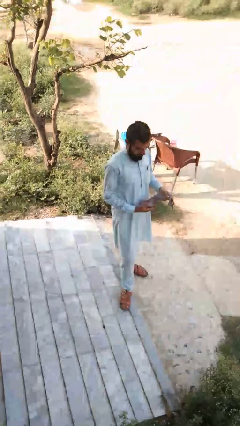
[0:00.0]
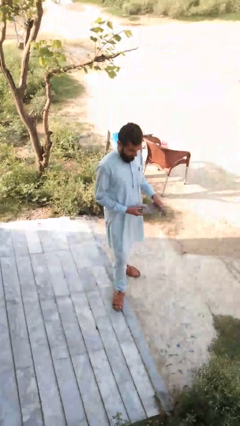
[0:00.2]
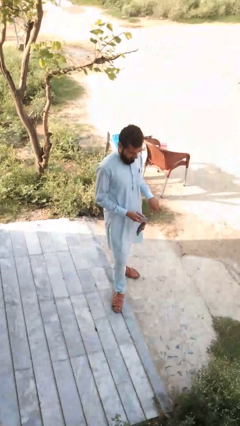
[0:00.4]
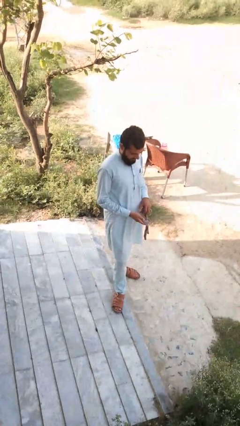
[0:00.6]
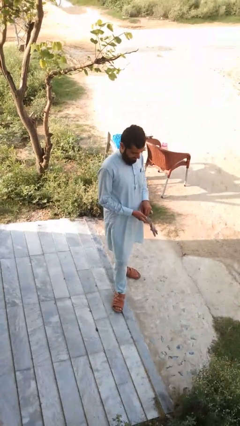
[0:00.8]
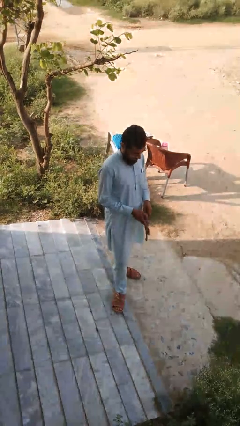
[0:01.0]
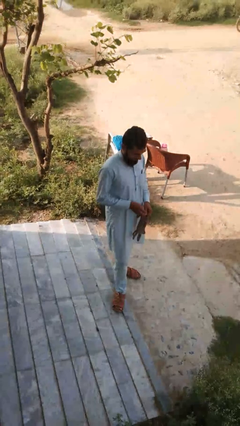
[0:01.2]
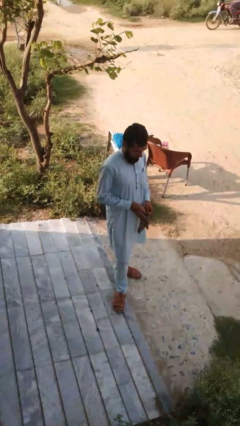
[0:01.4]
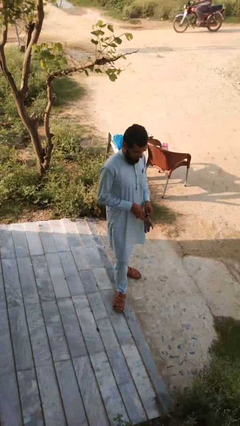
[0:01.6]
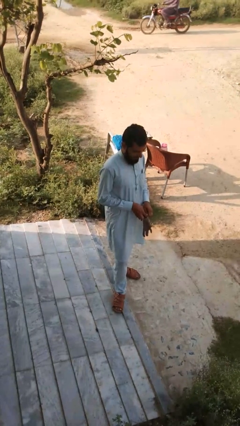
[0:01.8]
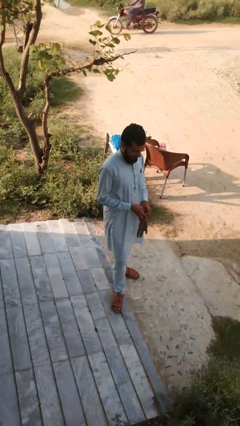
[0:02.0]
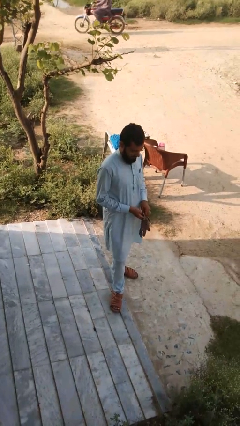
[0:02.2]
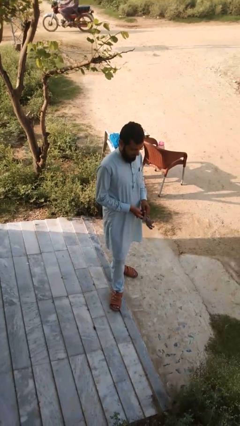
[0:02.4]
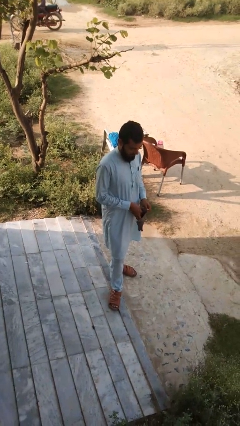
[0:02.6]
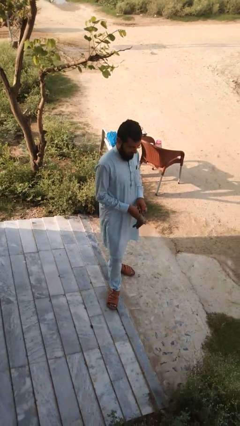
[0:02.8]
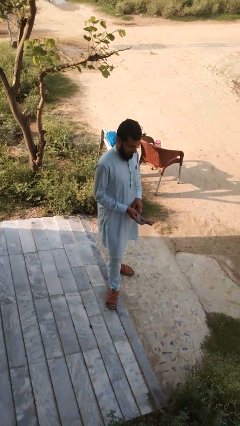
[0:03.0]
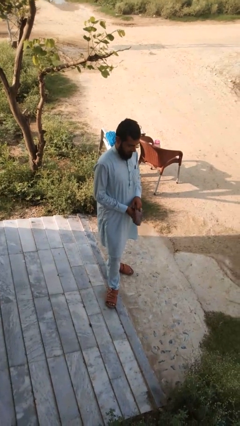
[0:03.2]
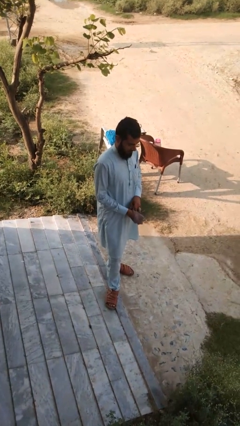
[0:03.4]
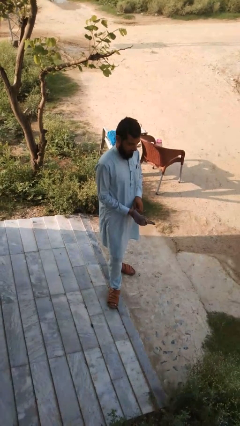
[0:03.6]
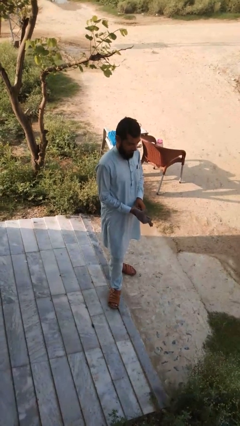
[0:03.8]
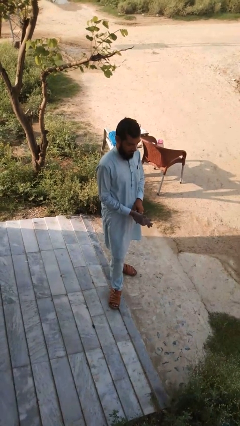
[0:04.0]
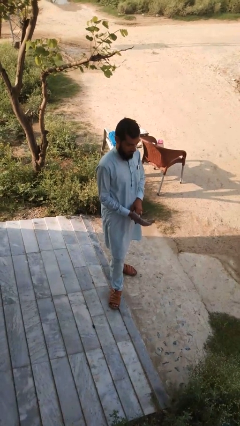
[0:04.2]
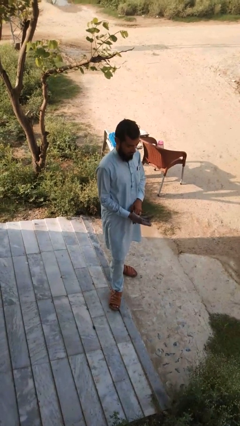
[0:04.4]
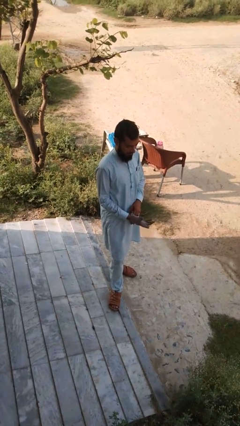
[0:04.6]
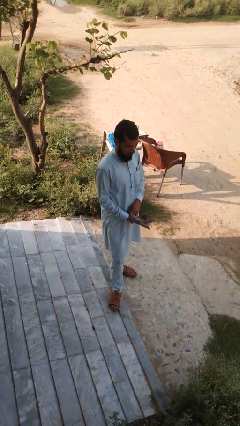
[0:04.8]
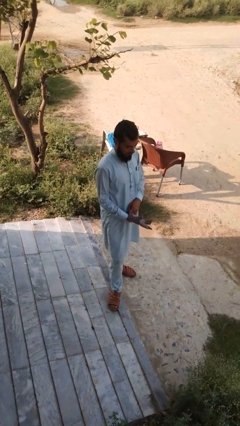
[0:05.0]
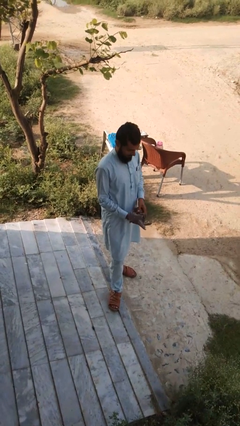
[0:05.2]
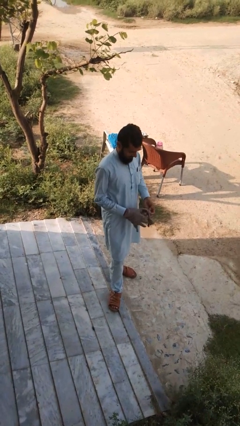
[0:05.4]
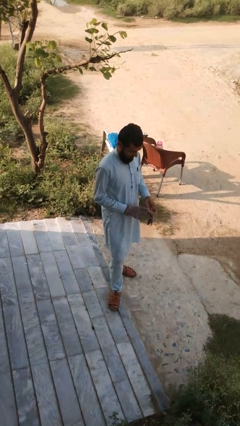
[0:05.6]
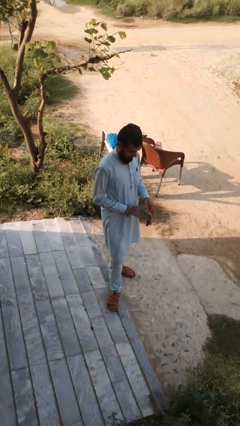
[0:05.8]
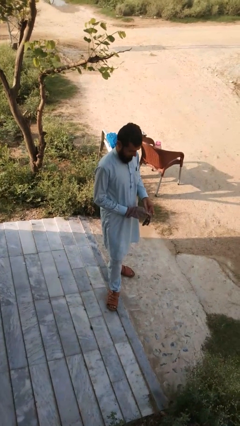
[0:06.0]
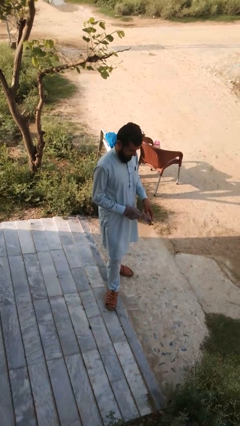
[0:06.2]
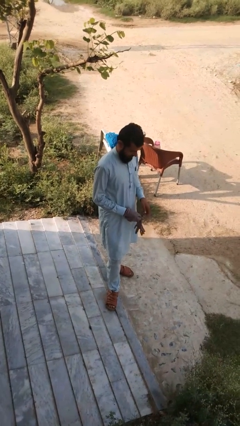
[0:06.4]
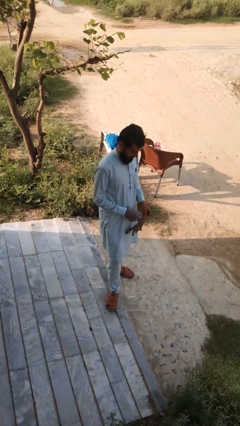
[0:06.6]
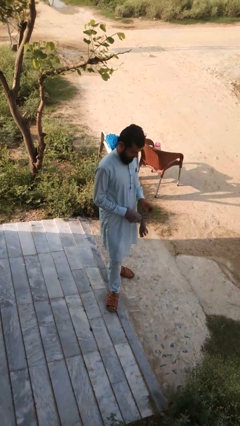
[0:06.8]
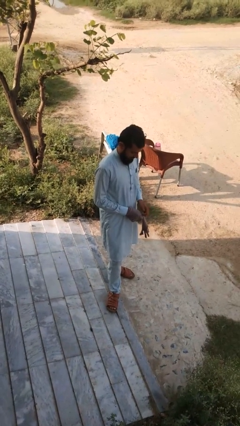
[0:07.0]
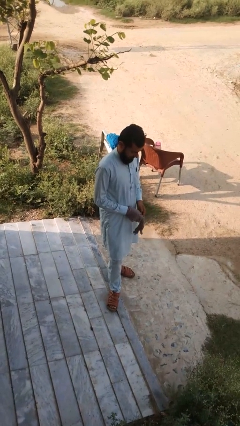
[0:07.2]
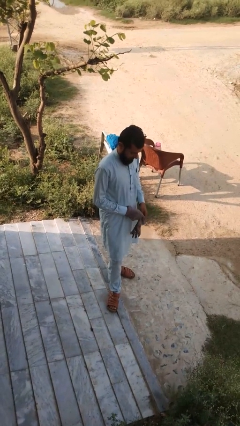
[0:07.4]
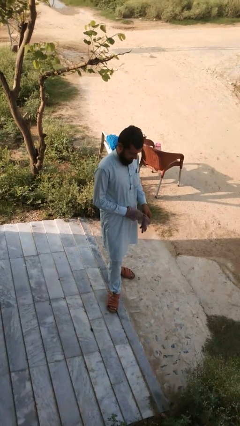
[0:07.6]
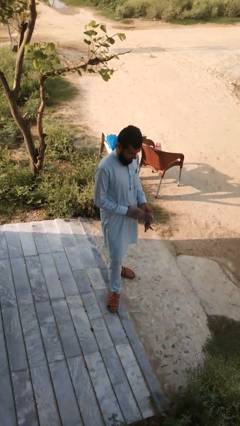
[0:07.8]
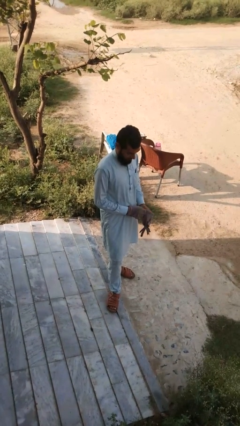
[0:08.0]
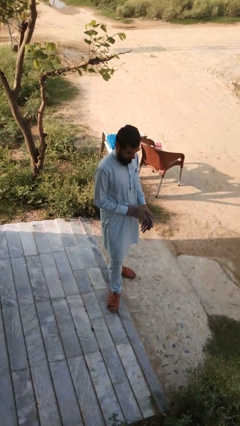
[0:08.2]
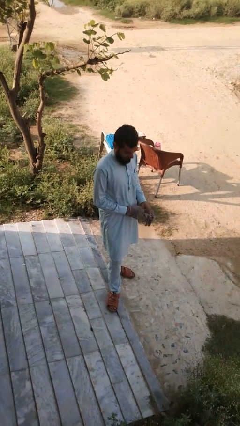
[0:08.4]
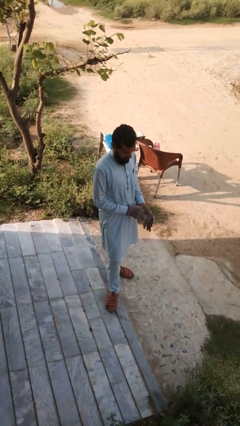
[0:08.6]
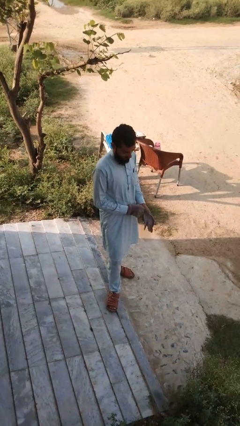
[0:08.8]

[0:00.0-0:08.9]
person puts on gloves

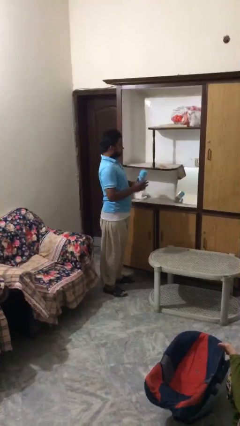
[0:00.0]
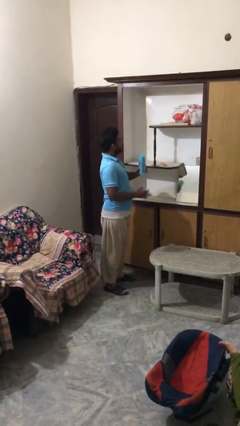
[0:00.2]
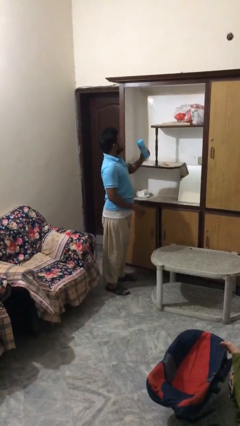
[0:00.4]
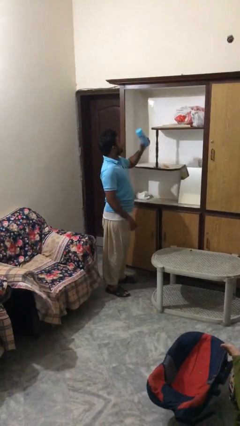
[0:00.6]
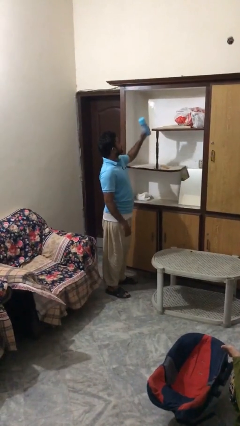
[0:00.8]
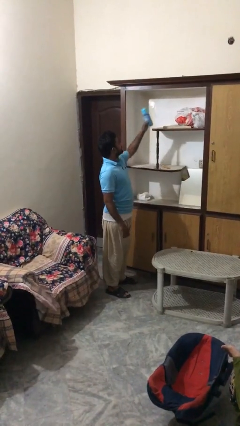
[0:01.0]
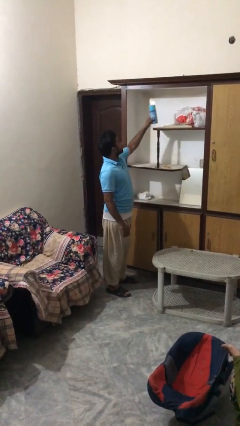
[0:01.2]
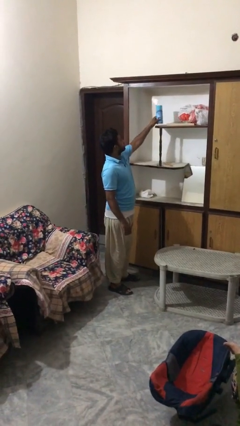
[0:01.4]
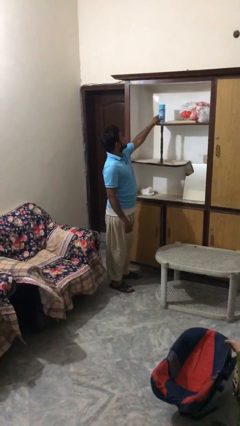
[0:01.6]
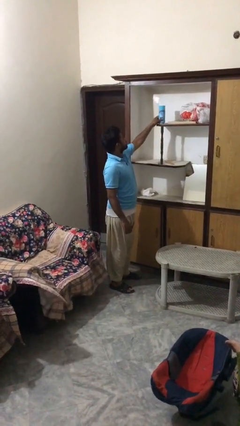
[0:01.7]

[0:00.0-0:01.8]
person puts down object on shelf

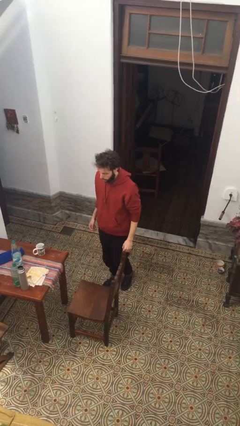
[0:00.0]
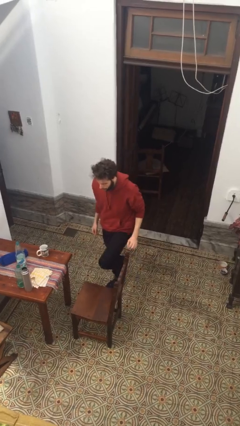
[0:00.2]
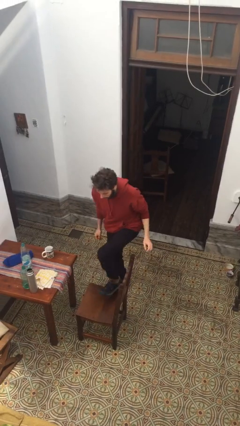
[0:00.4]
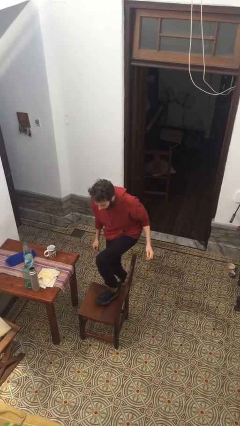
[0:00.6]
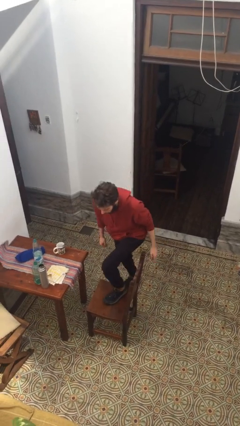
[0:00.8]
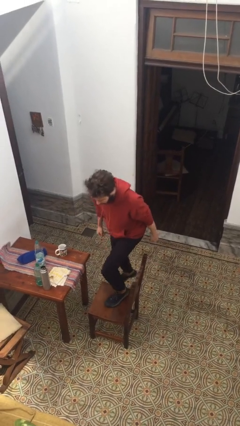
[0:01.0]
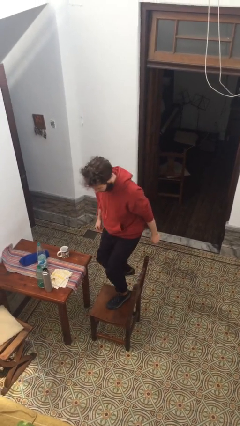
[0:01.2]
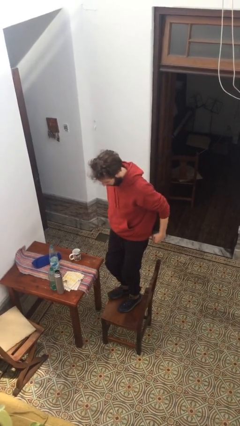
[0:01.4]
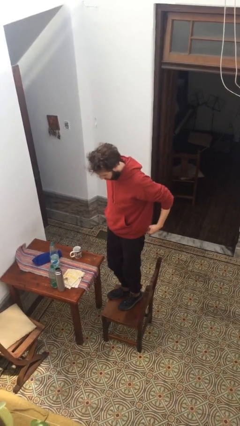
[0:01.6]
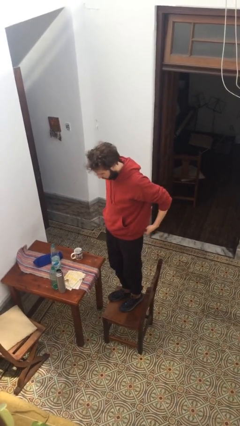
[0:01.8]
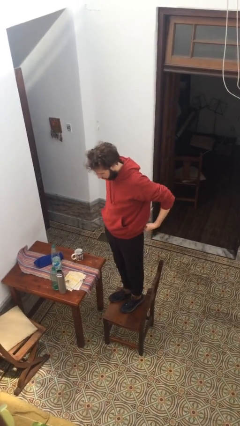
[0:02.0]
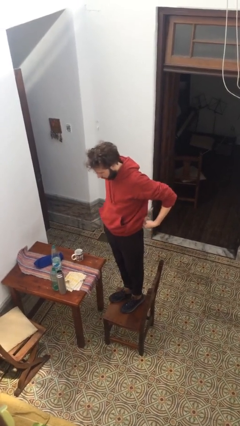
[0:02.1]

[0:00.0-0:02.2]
person climbs on chair

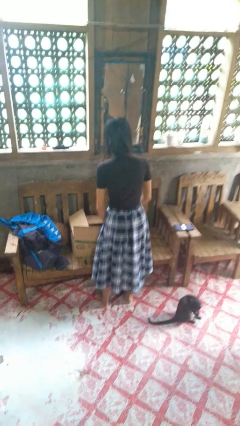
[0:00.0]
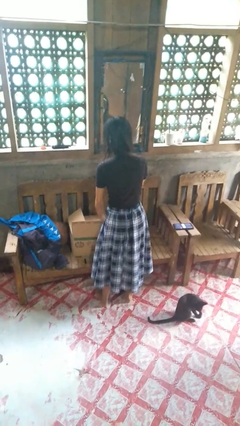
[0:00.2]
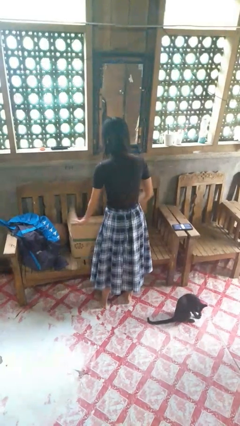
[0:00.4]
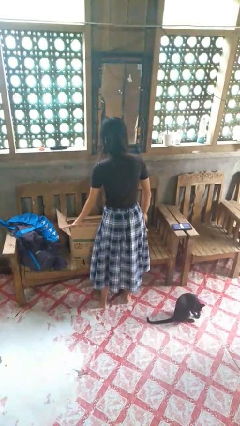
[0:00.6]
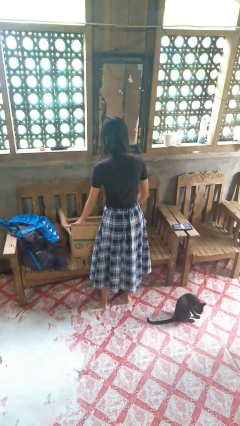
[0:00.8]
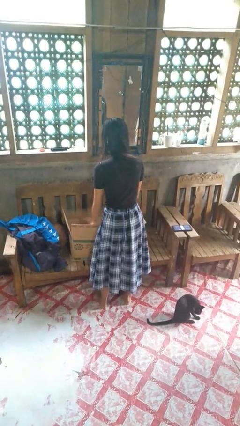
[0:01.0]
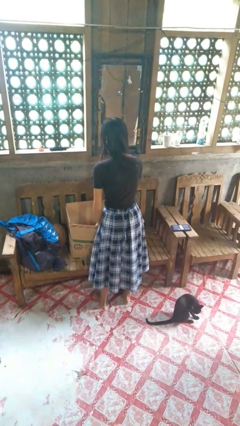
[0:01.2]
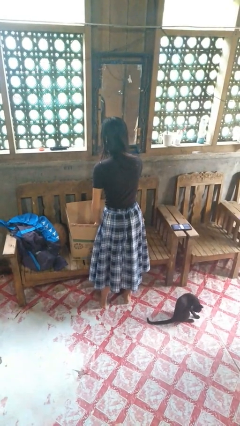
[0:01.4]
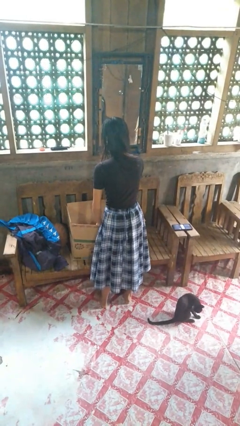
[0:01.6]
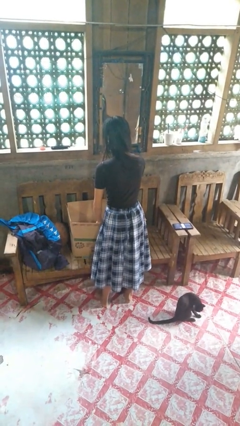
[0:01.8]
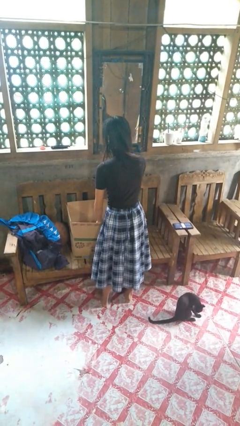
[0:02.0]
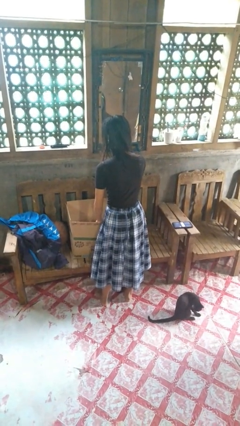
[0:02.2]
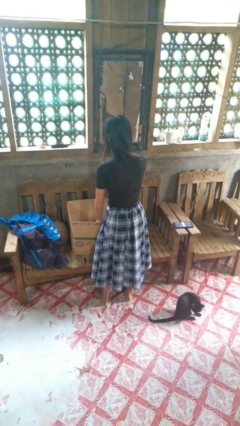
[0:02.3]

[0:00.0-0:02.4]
person opens box

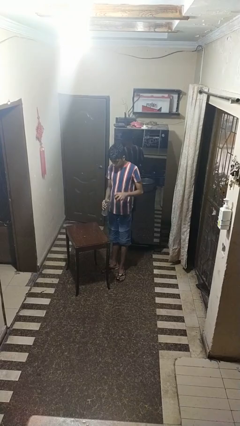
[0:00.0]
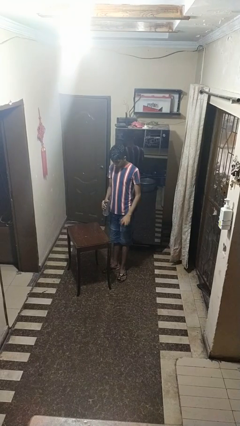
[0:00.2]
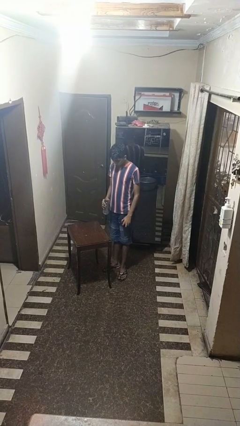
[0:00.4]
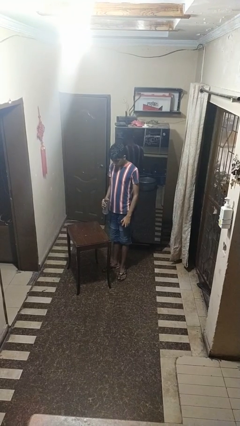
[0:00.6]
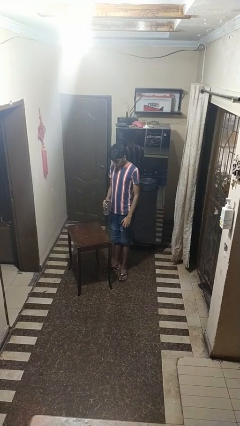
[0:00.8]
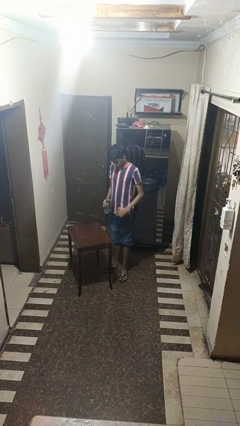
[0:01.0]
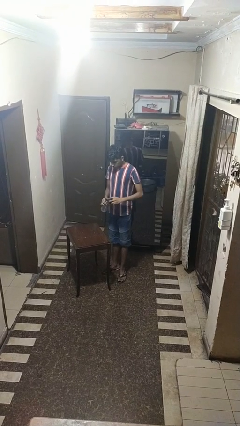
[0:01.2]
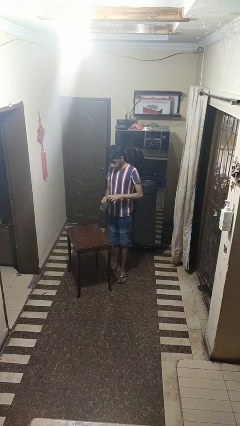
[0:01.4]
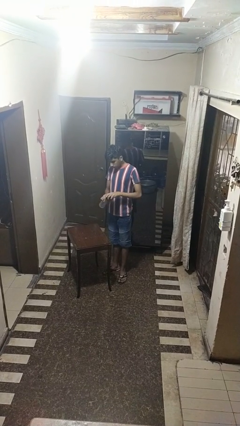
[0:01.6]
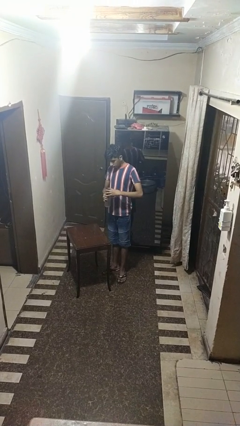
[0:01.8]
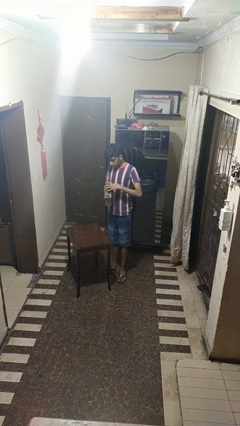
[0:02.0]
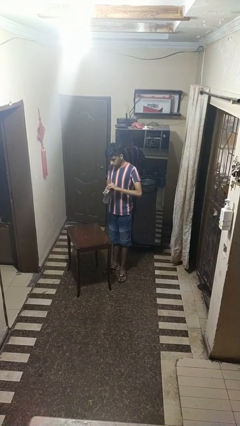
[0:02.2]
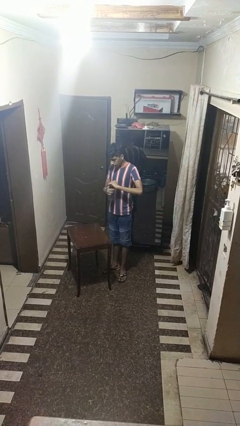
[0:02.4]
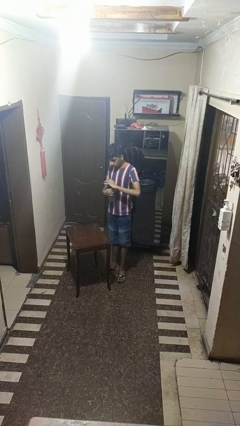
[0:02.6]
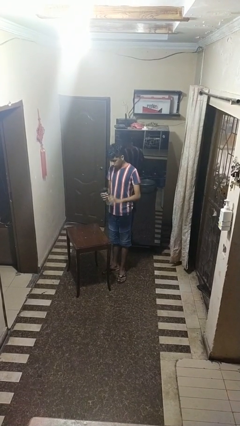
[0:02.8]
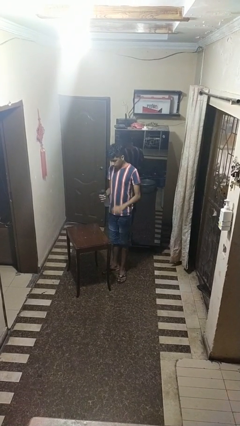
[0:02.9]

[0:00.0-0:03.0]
person screws lid to bottle
